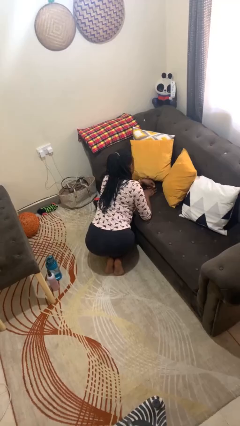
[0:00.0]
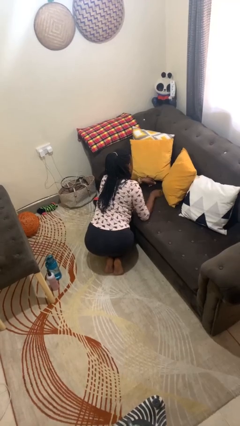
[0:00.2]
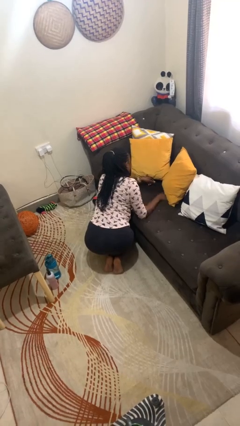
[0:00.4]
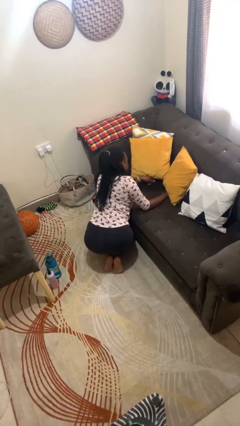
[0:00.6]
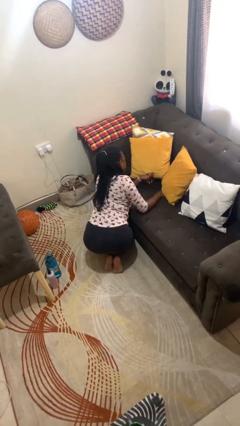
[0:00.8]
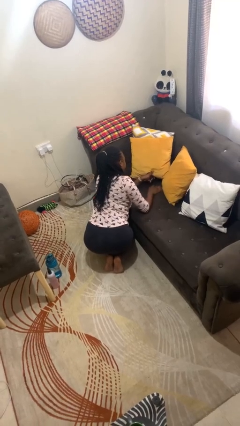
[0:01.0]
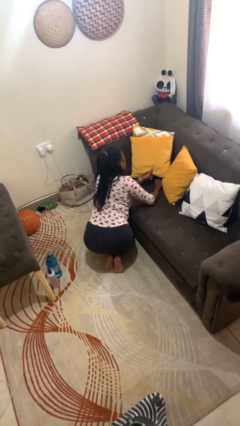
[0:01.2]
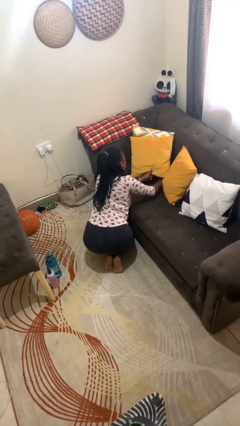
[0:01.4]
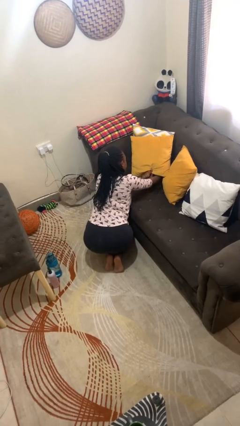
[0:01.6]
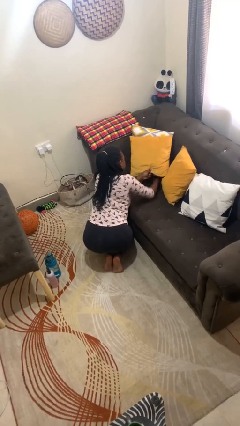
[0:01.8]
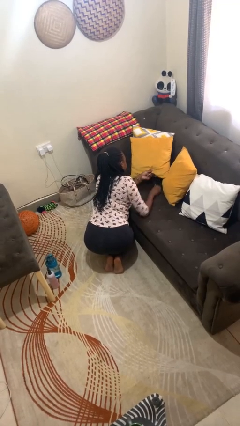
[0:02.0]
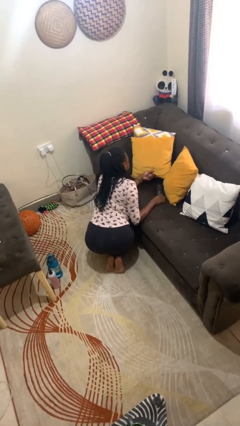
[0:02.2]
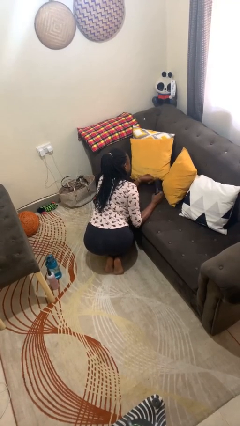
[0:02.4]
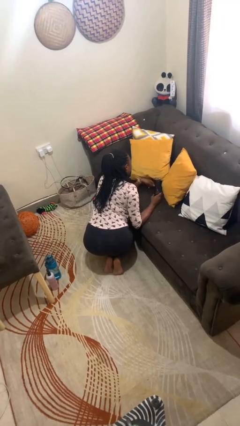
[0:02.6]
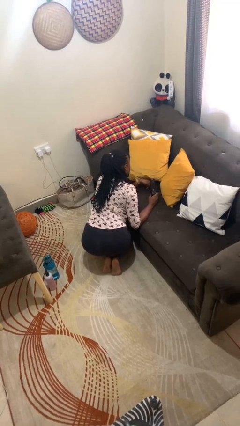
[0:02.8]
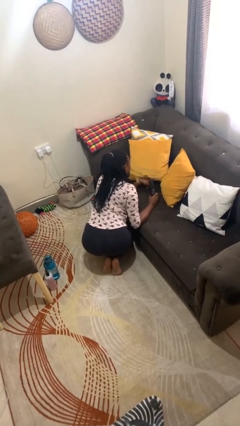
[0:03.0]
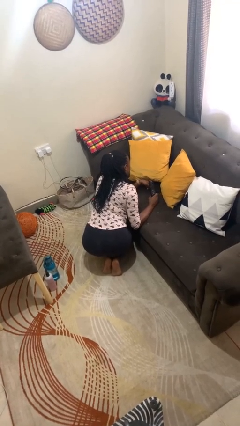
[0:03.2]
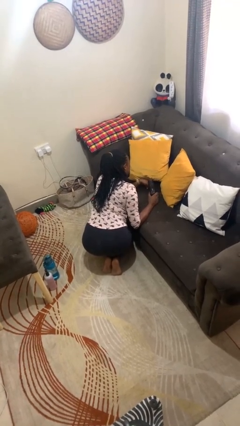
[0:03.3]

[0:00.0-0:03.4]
person searches in couch

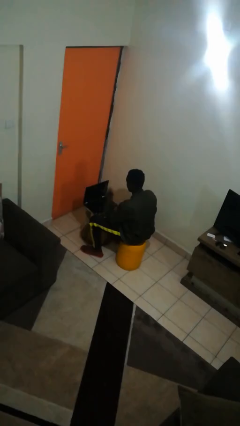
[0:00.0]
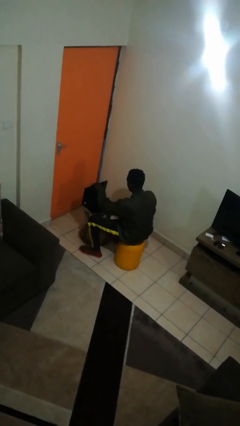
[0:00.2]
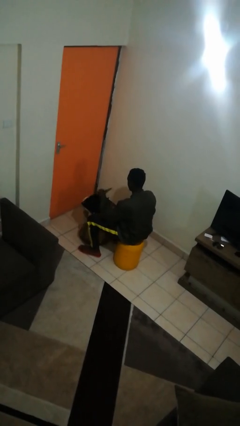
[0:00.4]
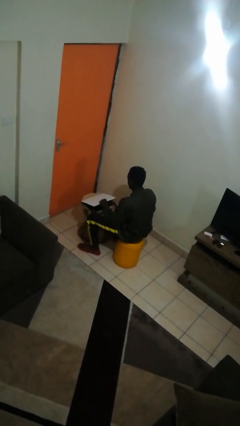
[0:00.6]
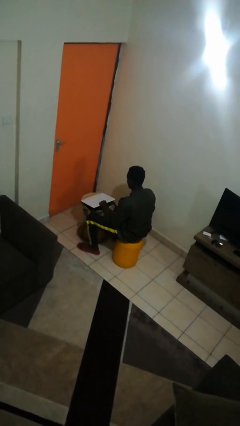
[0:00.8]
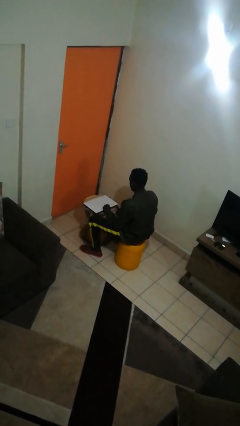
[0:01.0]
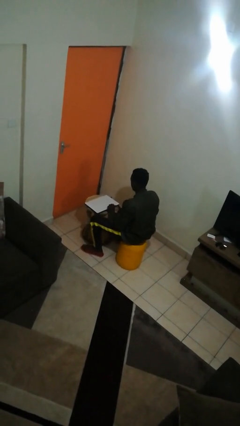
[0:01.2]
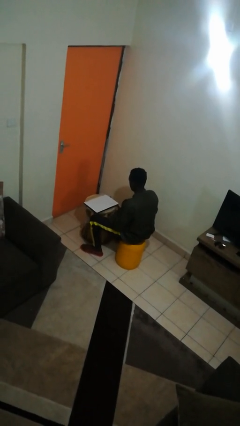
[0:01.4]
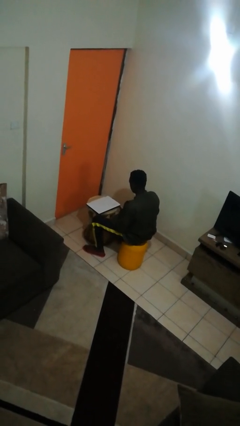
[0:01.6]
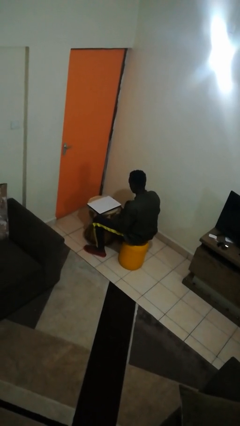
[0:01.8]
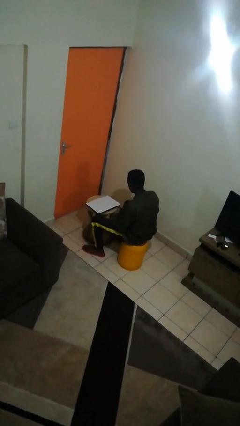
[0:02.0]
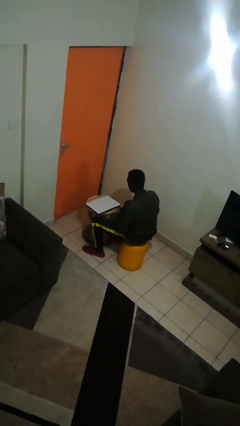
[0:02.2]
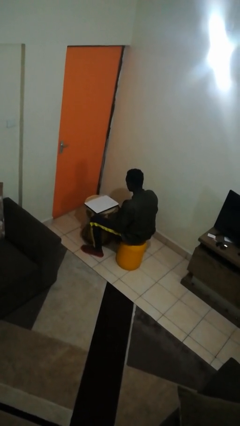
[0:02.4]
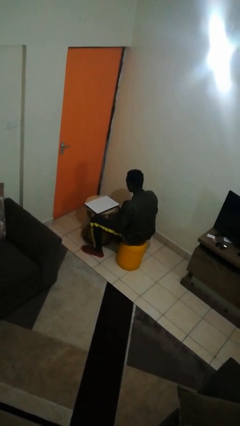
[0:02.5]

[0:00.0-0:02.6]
person closes laptop

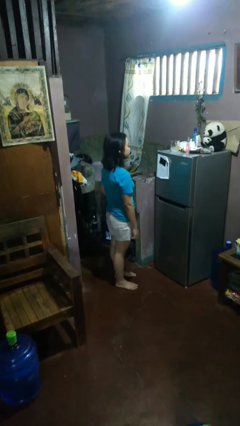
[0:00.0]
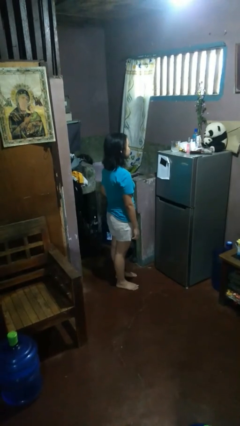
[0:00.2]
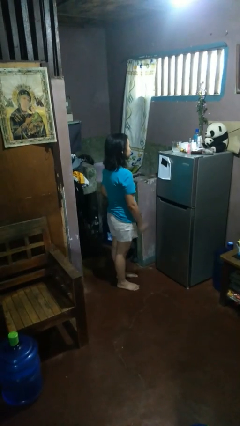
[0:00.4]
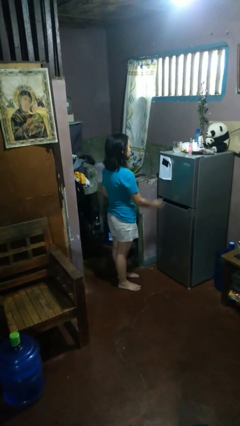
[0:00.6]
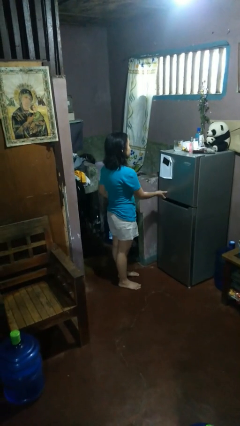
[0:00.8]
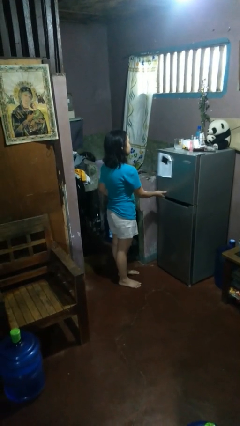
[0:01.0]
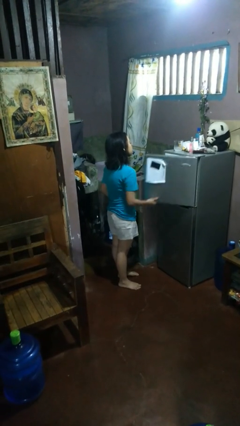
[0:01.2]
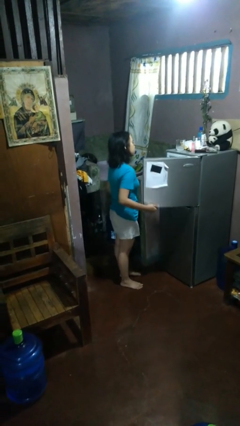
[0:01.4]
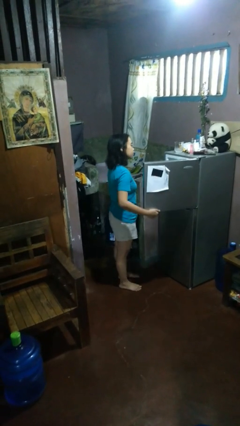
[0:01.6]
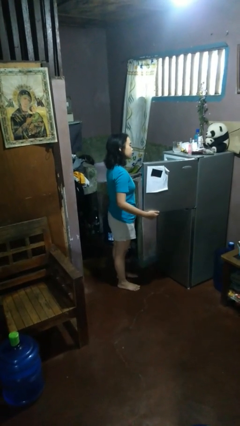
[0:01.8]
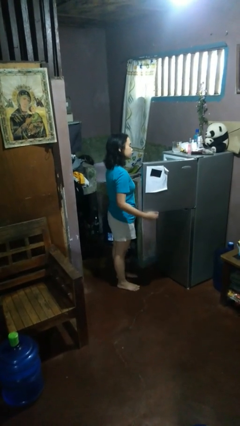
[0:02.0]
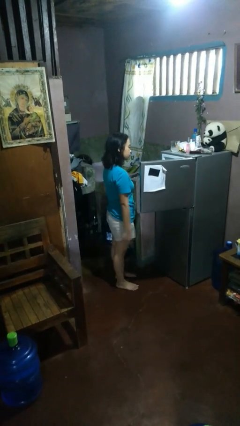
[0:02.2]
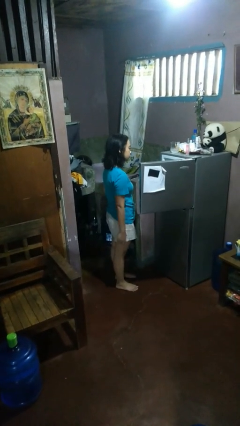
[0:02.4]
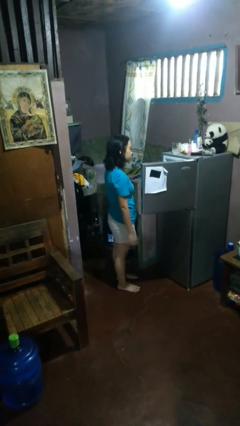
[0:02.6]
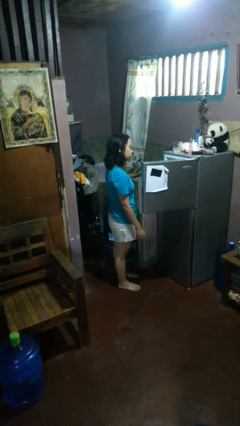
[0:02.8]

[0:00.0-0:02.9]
person opens refrigerator

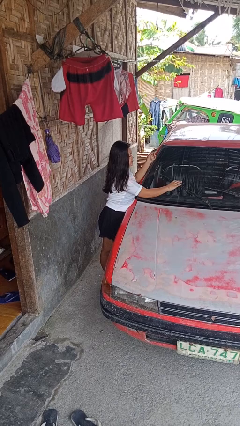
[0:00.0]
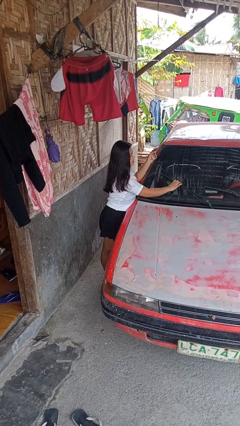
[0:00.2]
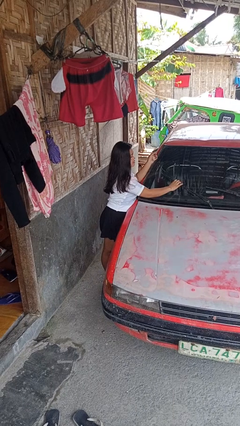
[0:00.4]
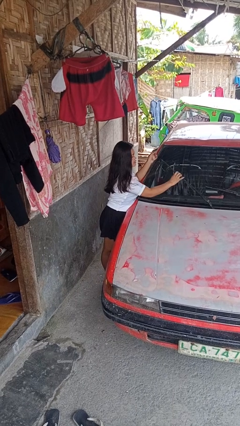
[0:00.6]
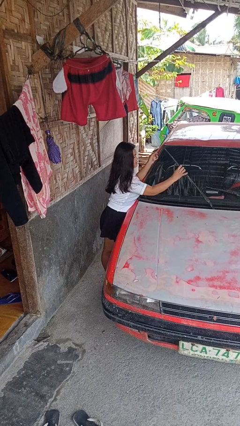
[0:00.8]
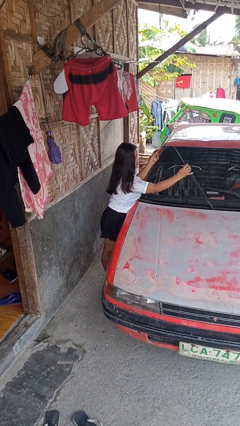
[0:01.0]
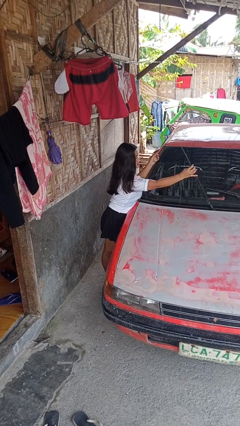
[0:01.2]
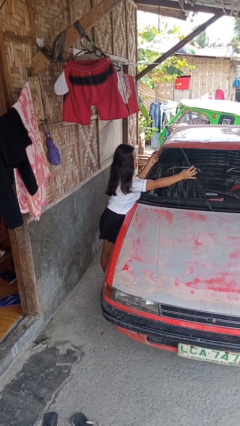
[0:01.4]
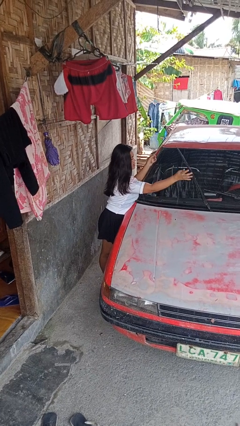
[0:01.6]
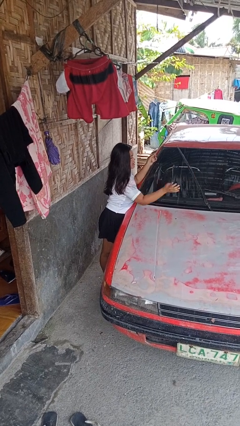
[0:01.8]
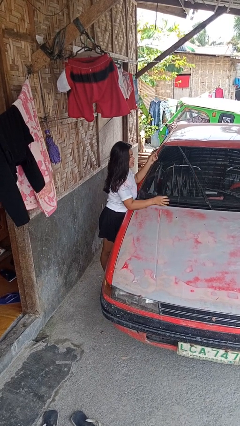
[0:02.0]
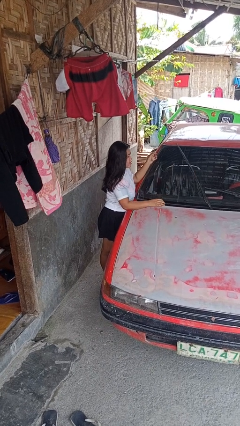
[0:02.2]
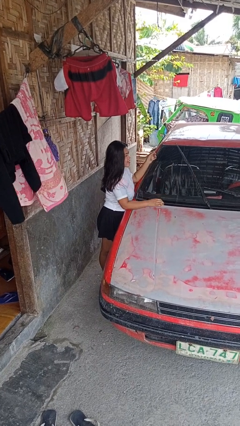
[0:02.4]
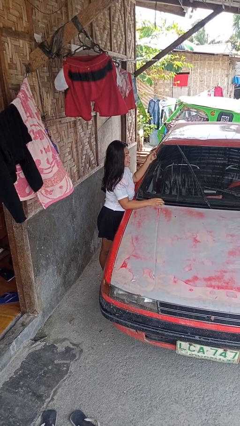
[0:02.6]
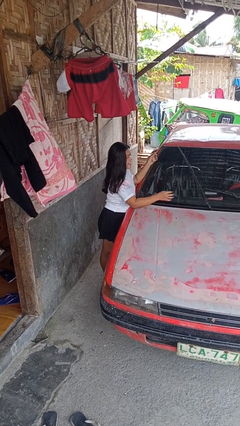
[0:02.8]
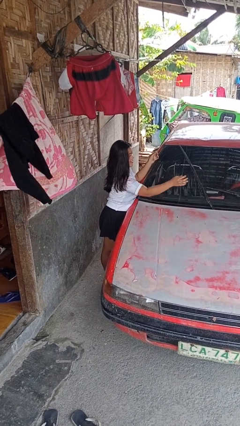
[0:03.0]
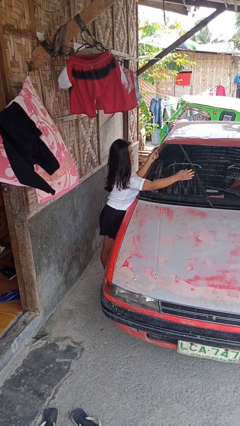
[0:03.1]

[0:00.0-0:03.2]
person flips up car wipers

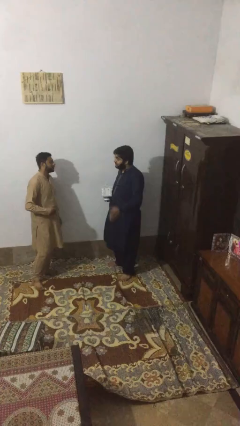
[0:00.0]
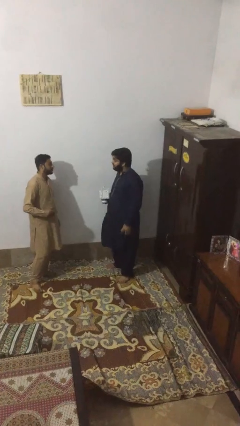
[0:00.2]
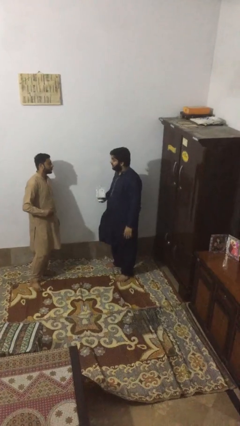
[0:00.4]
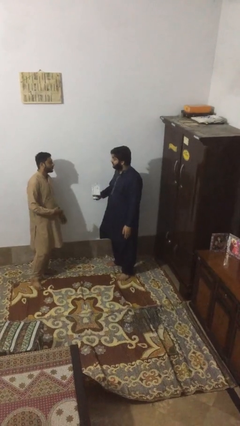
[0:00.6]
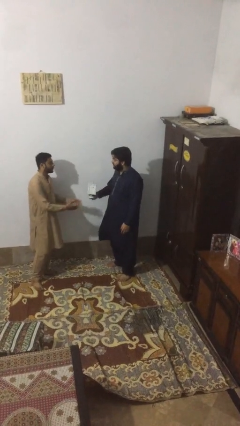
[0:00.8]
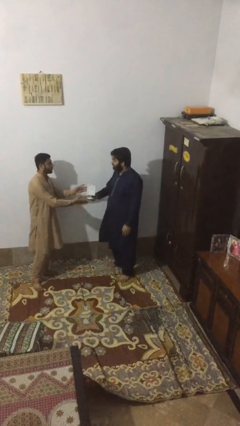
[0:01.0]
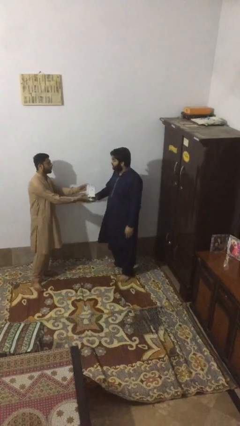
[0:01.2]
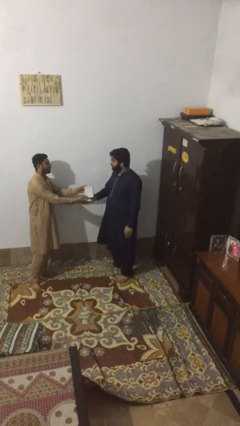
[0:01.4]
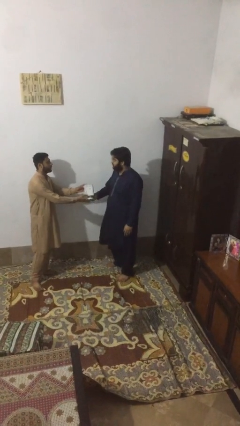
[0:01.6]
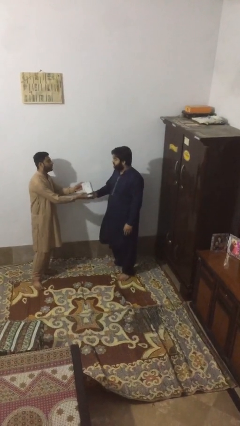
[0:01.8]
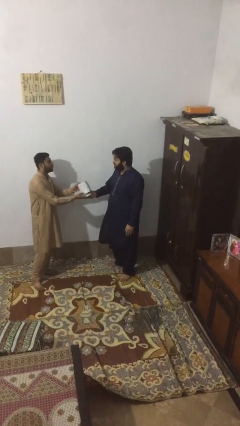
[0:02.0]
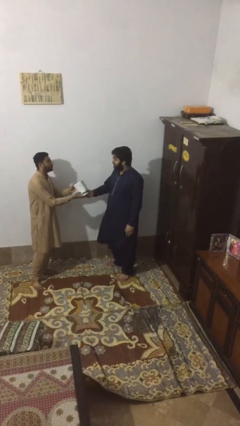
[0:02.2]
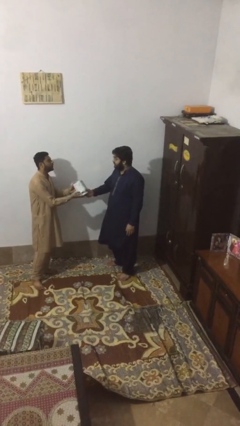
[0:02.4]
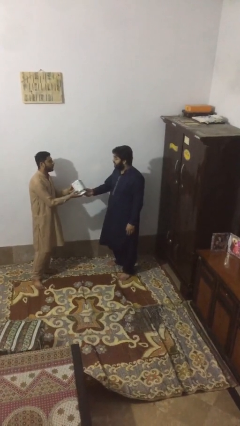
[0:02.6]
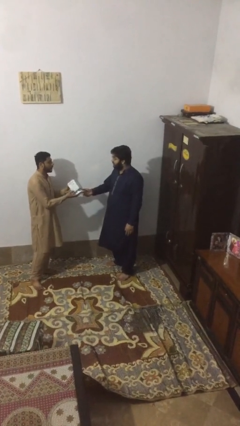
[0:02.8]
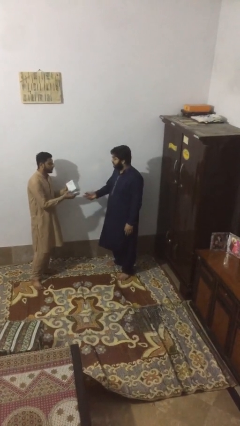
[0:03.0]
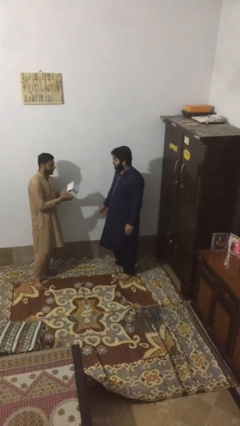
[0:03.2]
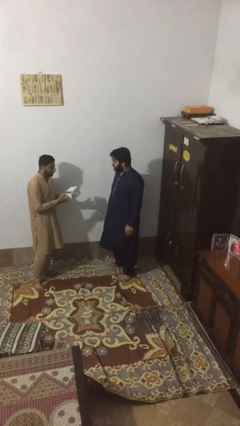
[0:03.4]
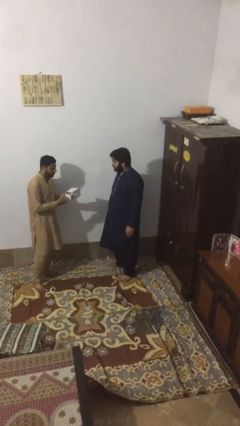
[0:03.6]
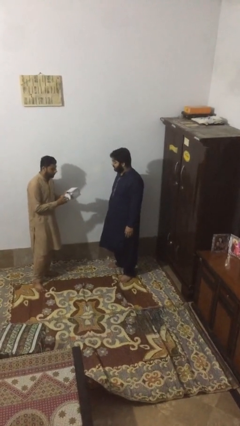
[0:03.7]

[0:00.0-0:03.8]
person transfers object to person

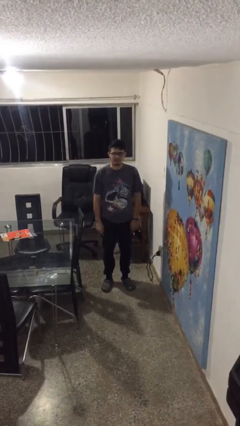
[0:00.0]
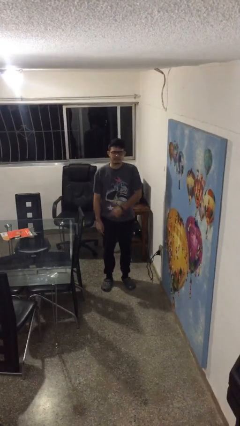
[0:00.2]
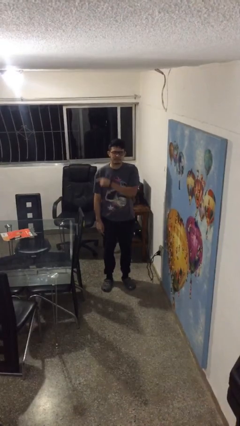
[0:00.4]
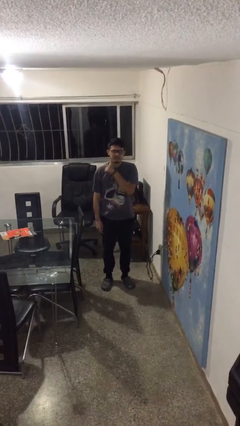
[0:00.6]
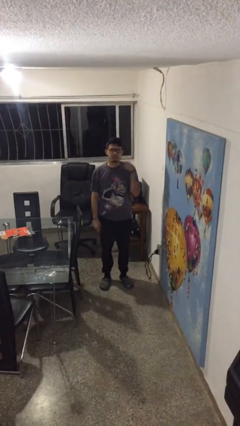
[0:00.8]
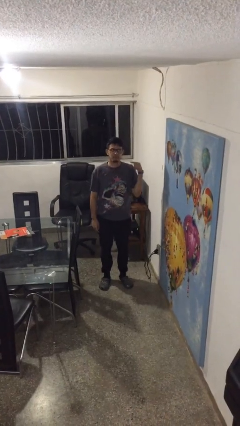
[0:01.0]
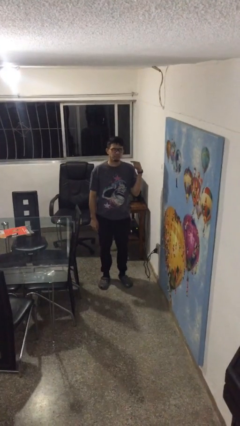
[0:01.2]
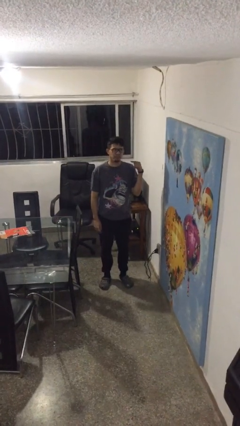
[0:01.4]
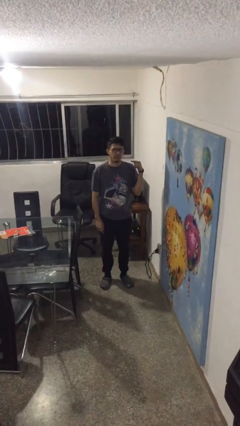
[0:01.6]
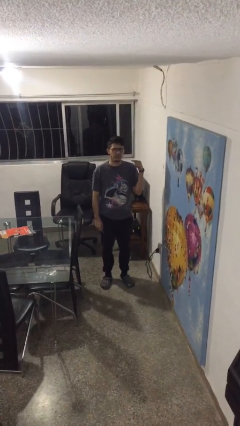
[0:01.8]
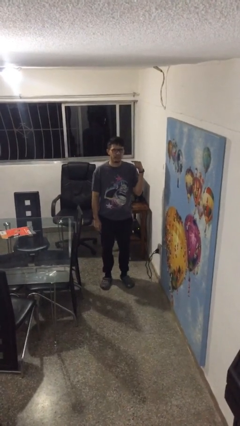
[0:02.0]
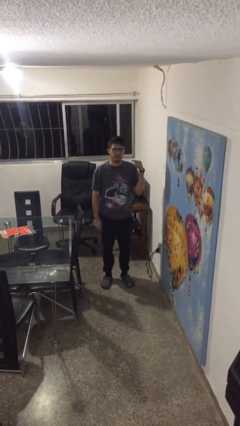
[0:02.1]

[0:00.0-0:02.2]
person gestures cut
